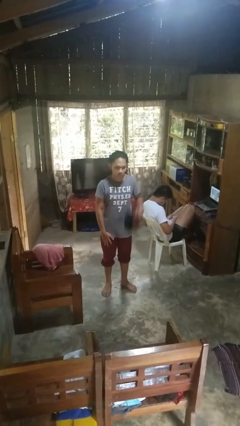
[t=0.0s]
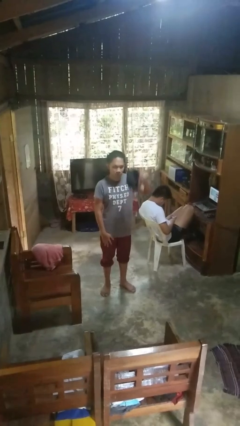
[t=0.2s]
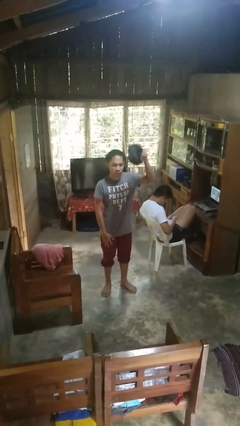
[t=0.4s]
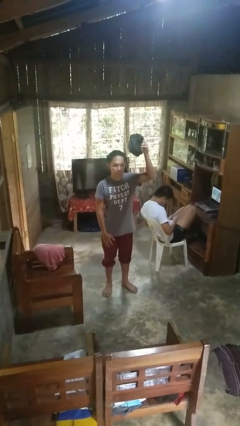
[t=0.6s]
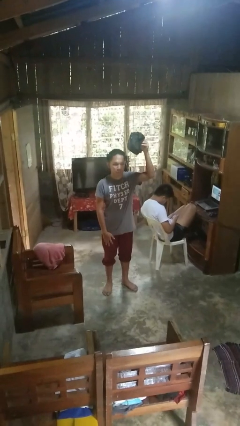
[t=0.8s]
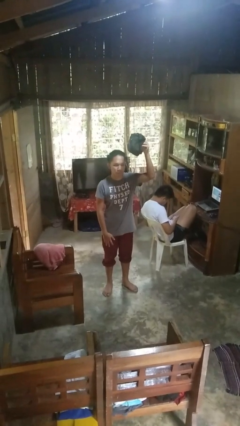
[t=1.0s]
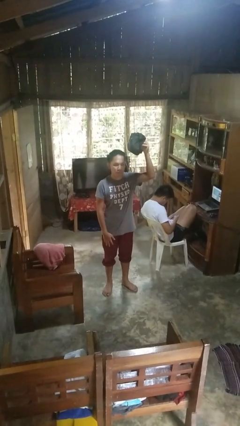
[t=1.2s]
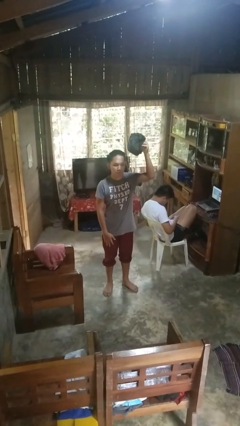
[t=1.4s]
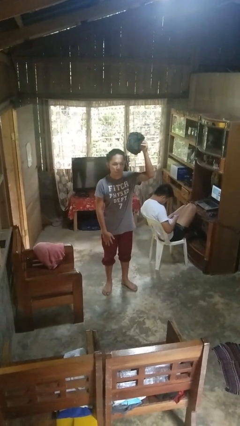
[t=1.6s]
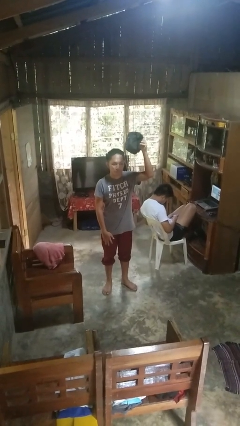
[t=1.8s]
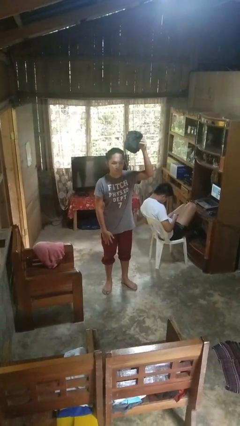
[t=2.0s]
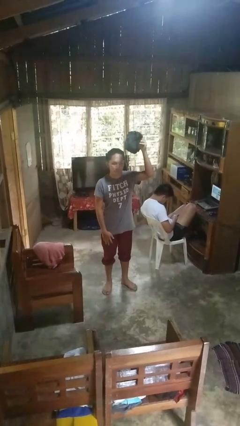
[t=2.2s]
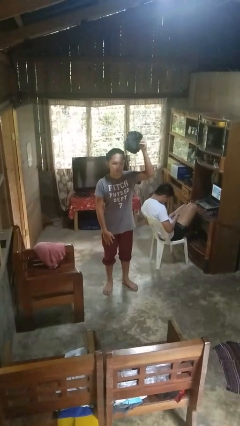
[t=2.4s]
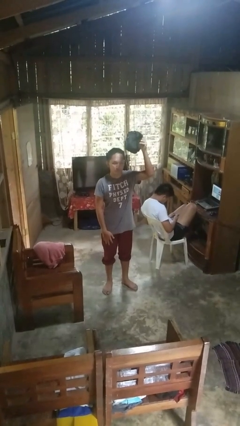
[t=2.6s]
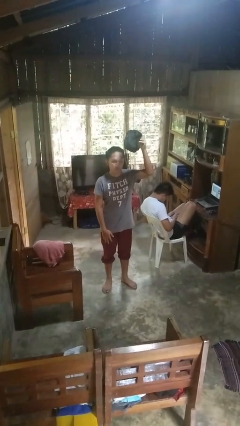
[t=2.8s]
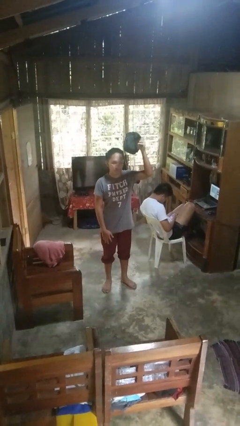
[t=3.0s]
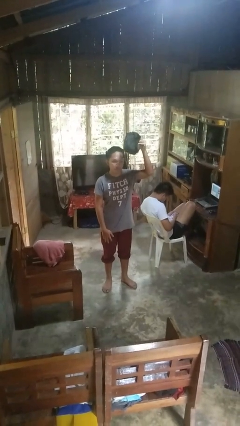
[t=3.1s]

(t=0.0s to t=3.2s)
person holds object above head

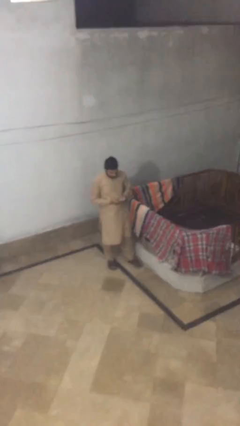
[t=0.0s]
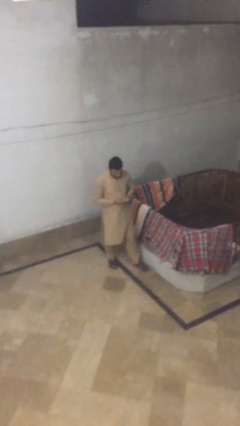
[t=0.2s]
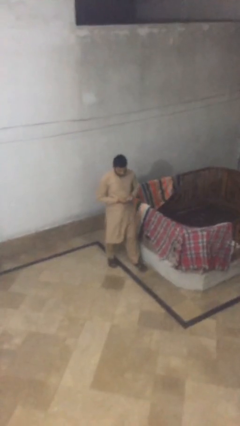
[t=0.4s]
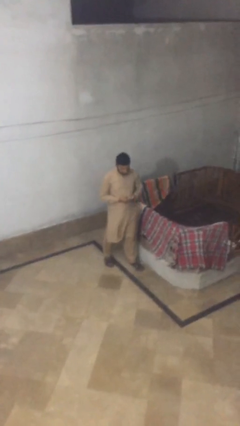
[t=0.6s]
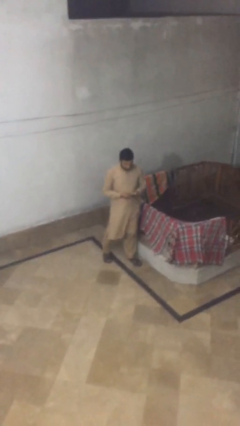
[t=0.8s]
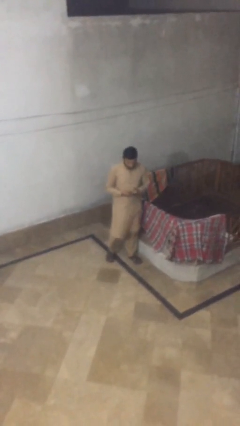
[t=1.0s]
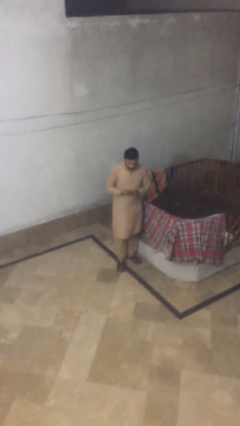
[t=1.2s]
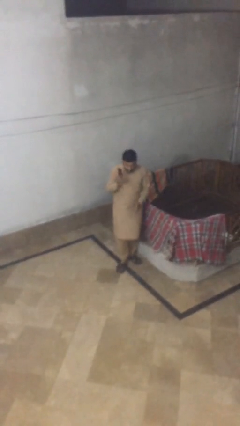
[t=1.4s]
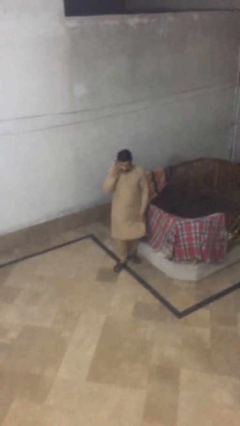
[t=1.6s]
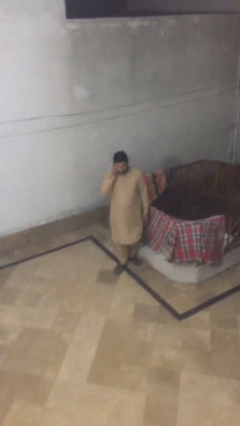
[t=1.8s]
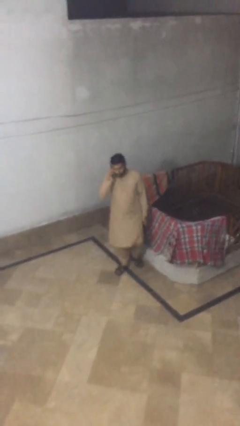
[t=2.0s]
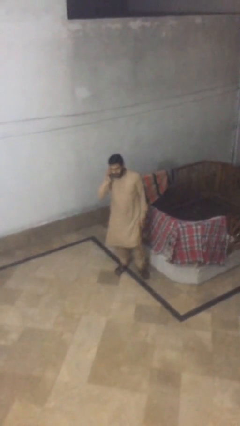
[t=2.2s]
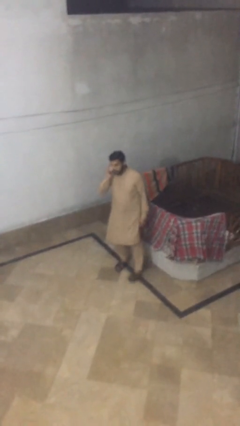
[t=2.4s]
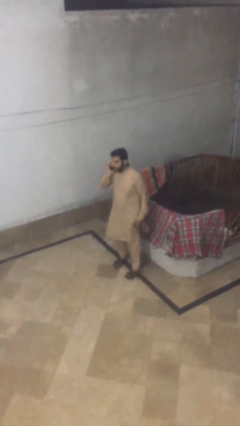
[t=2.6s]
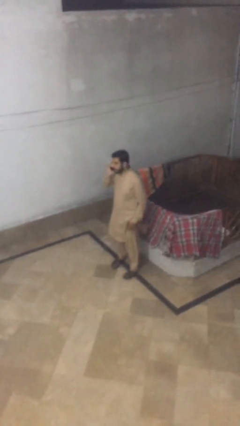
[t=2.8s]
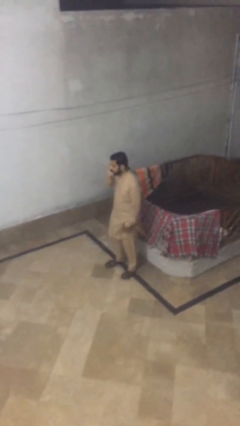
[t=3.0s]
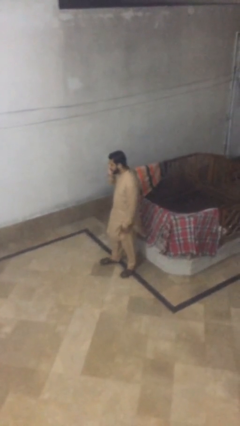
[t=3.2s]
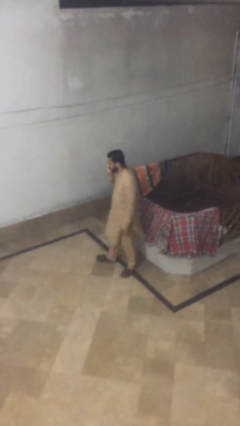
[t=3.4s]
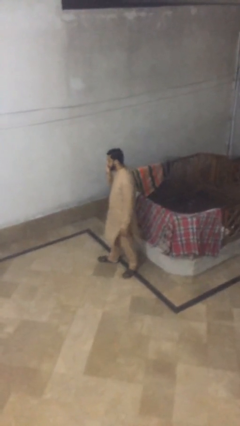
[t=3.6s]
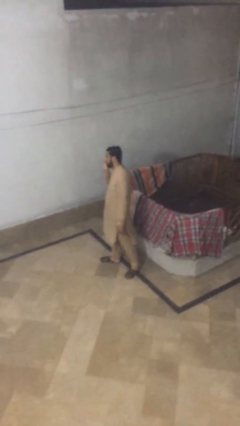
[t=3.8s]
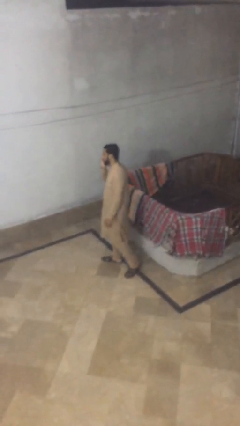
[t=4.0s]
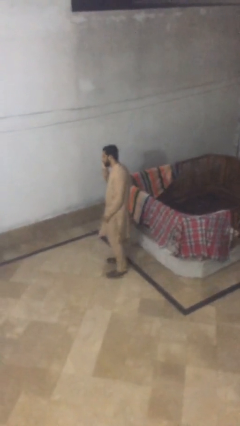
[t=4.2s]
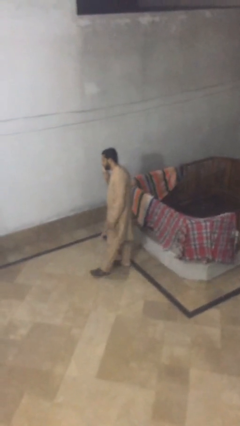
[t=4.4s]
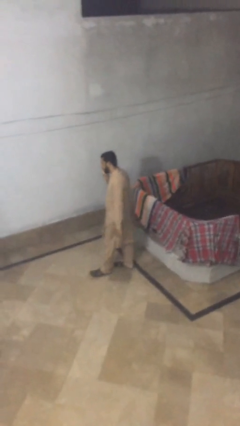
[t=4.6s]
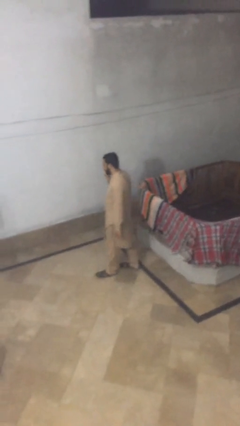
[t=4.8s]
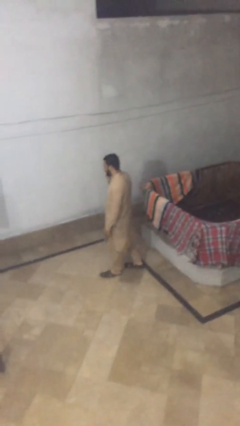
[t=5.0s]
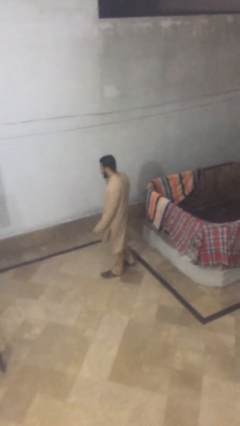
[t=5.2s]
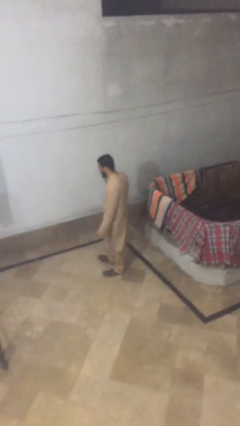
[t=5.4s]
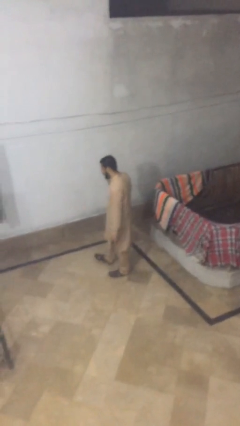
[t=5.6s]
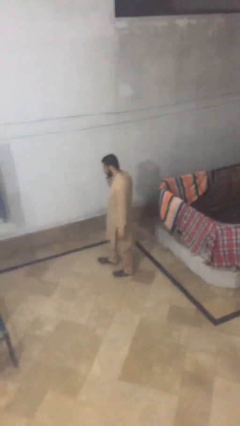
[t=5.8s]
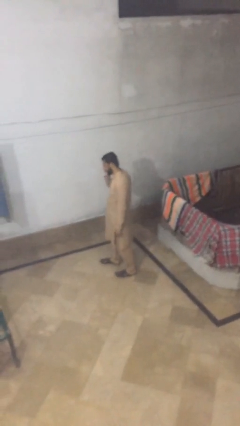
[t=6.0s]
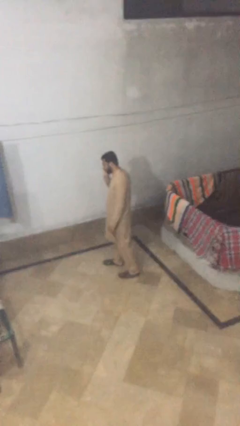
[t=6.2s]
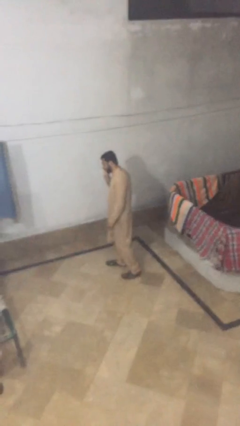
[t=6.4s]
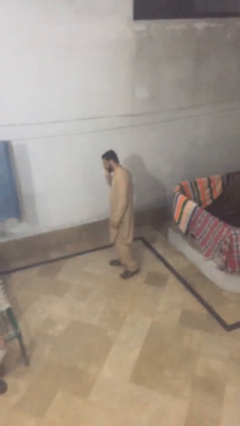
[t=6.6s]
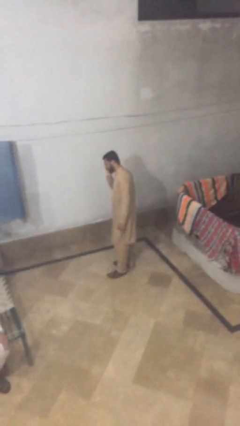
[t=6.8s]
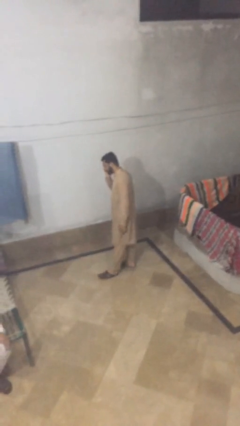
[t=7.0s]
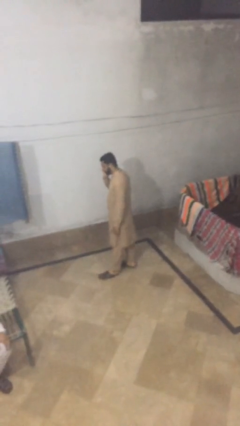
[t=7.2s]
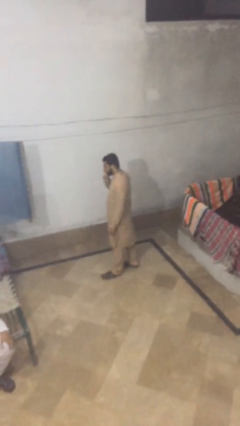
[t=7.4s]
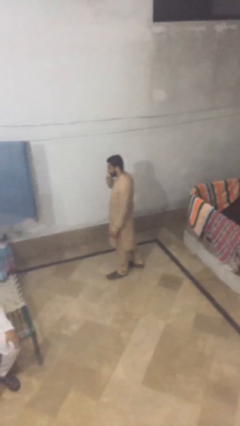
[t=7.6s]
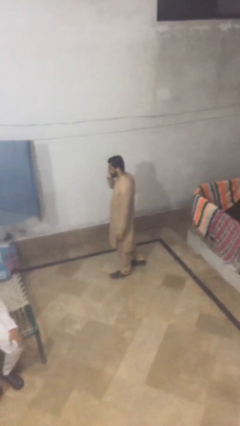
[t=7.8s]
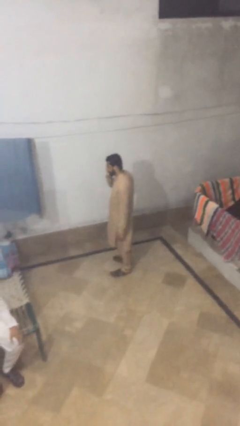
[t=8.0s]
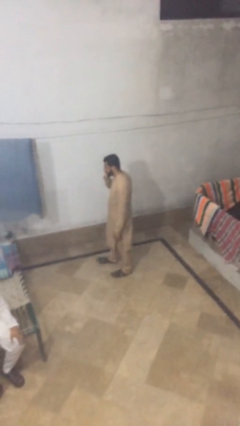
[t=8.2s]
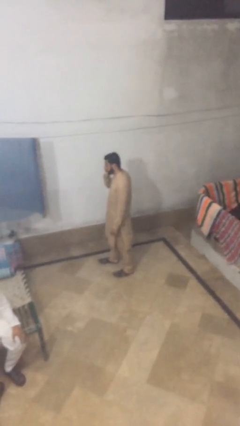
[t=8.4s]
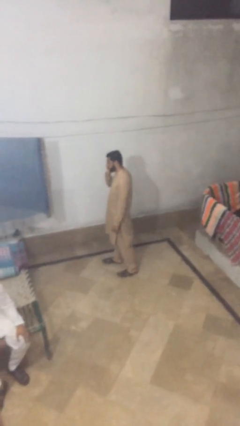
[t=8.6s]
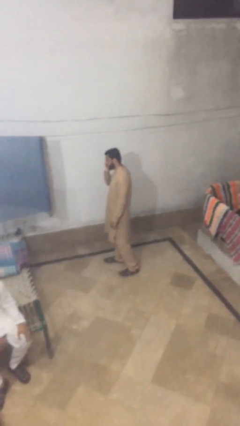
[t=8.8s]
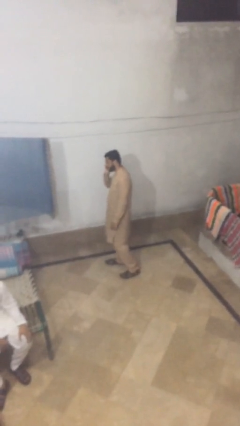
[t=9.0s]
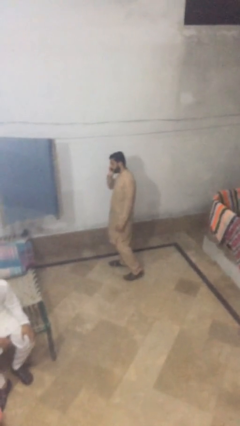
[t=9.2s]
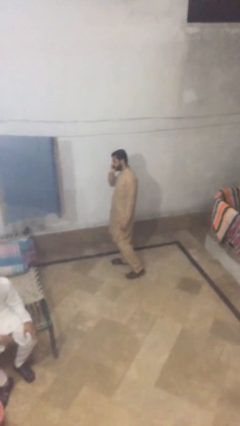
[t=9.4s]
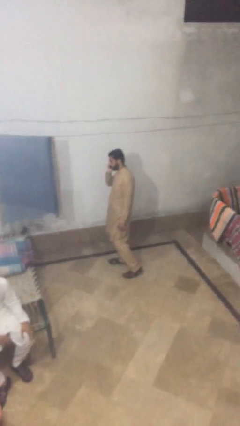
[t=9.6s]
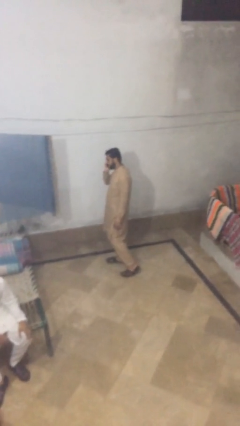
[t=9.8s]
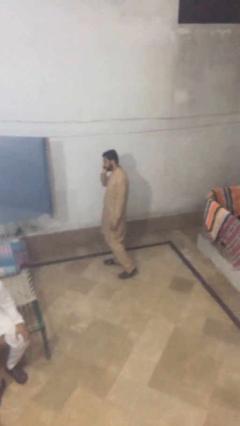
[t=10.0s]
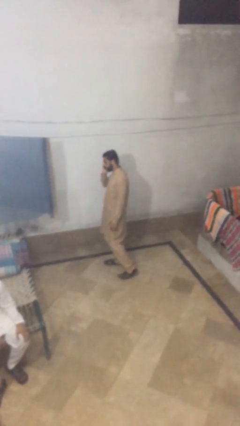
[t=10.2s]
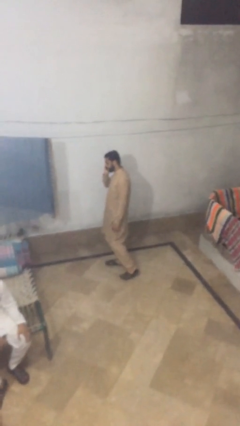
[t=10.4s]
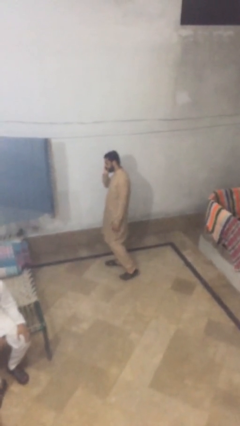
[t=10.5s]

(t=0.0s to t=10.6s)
person talks on phone

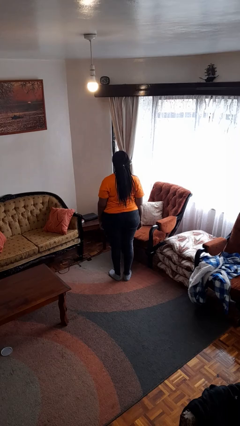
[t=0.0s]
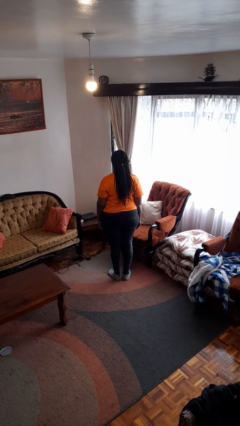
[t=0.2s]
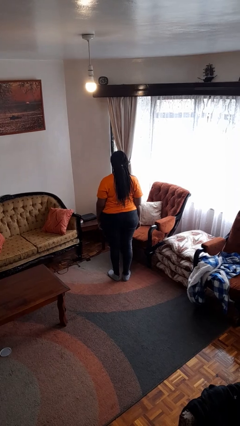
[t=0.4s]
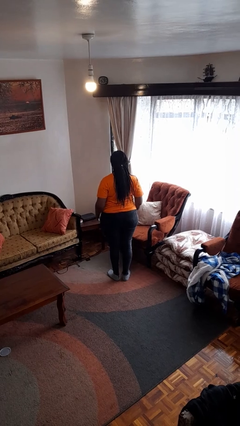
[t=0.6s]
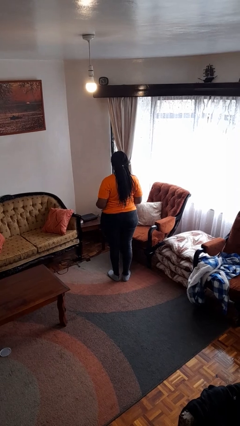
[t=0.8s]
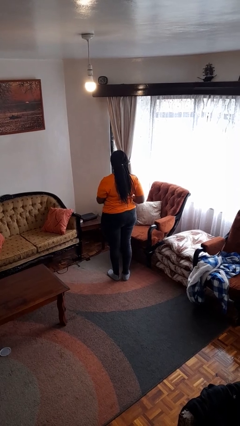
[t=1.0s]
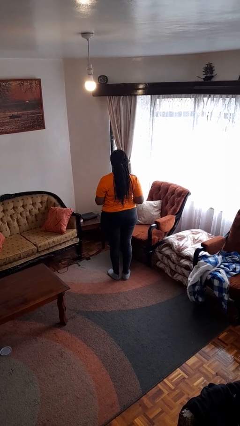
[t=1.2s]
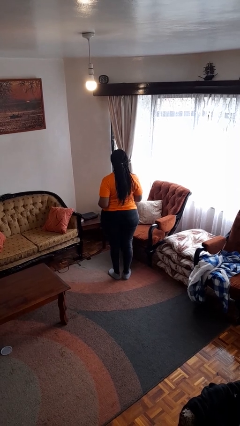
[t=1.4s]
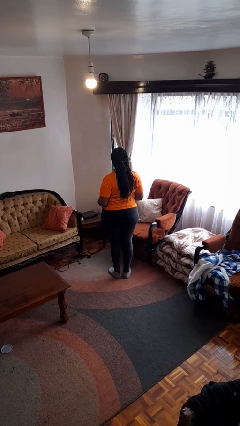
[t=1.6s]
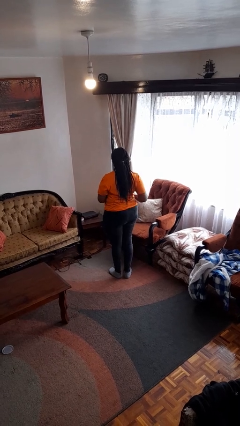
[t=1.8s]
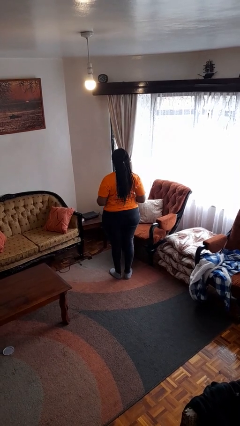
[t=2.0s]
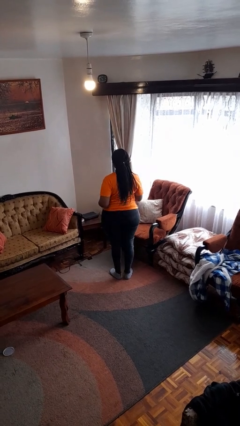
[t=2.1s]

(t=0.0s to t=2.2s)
person wiggles hips

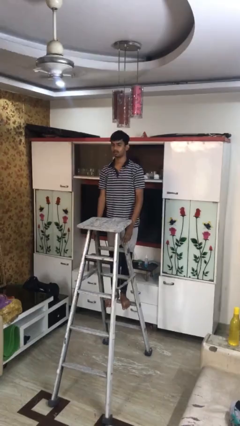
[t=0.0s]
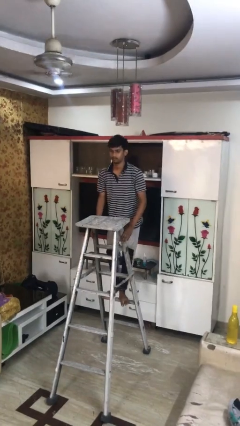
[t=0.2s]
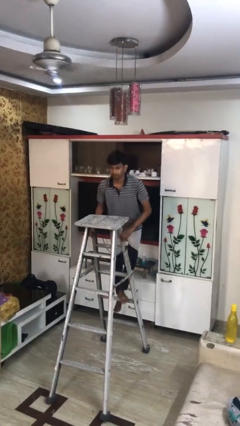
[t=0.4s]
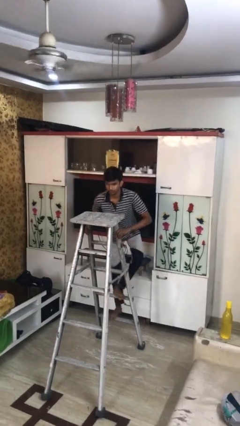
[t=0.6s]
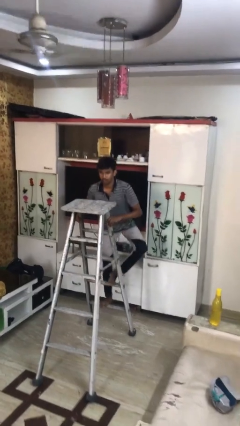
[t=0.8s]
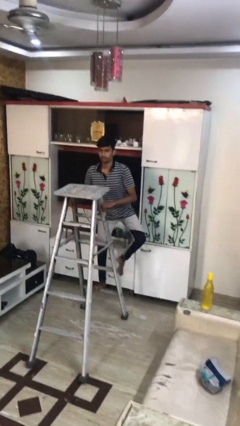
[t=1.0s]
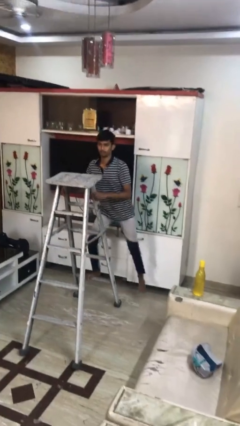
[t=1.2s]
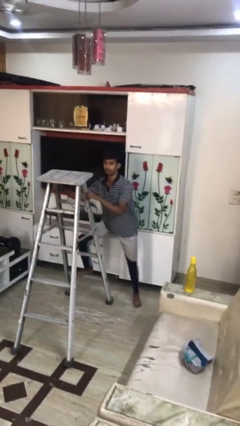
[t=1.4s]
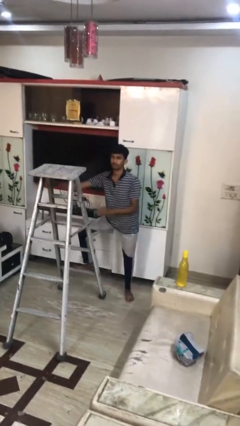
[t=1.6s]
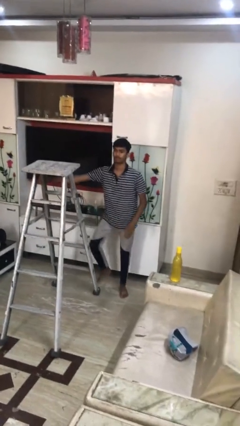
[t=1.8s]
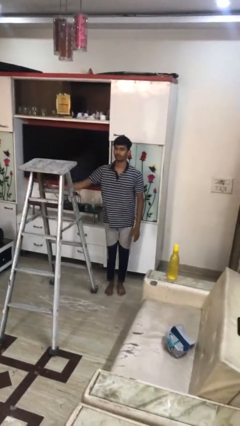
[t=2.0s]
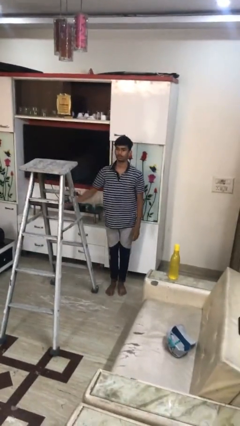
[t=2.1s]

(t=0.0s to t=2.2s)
person climbs down ladder
